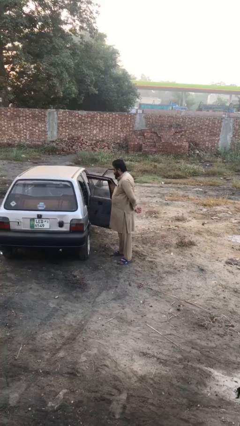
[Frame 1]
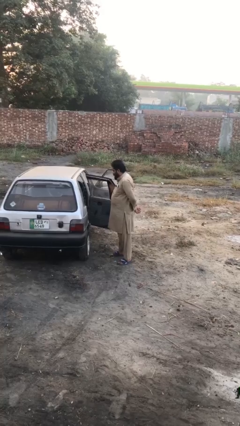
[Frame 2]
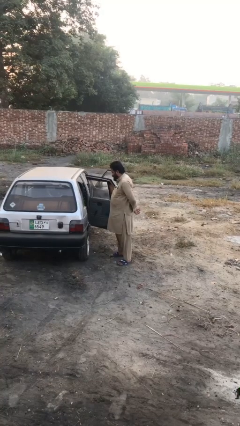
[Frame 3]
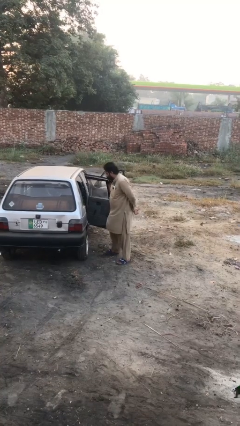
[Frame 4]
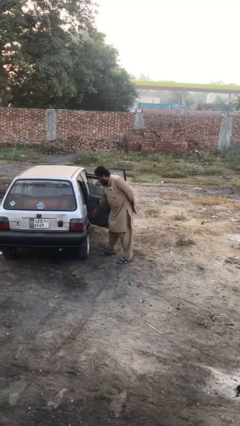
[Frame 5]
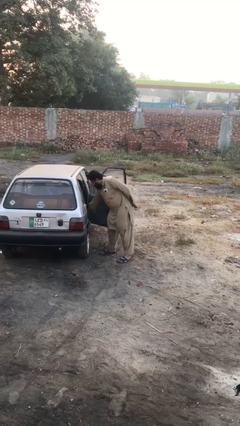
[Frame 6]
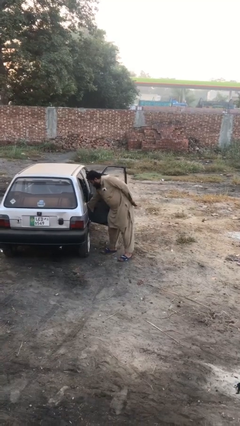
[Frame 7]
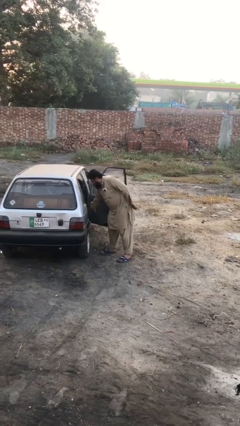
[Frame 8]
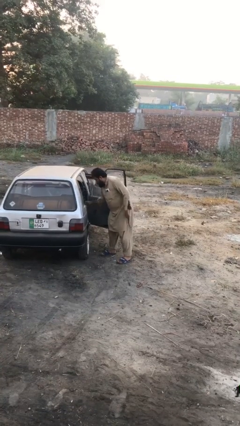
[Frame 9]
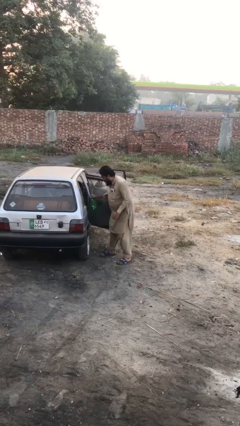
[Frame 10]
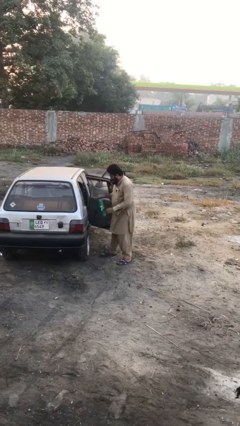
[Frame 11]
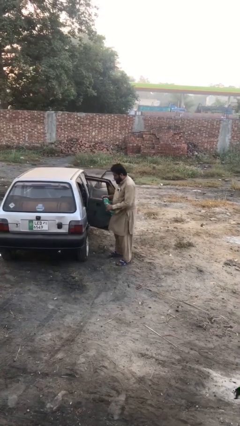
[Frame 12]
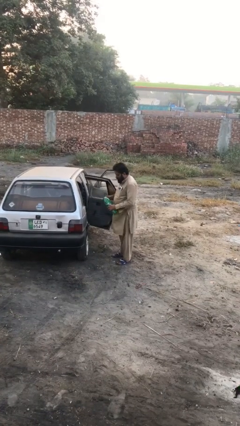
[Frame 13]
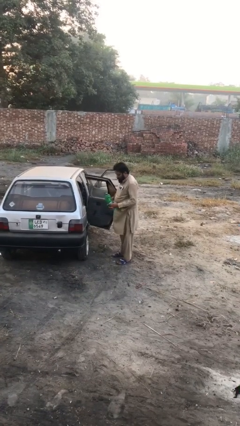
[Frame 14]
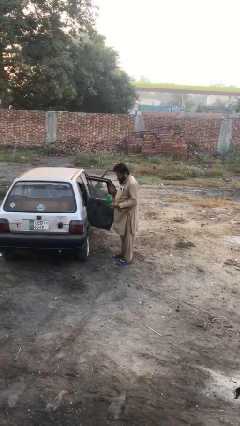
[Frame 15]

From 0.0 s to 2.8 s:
person unloads car

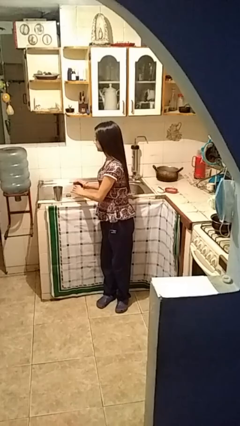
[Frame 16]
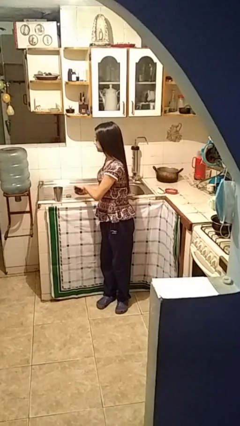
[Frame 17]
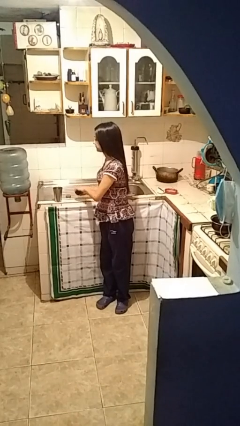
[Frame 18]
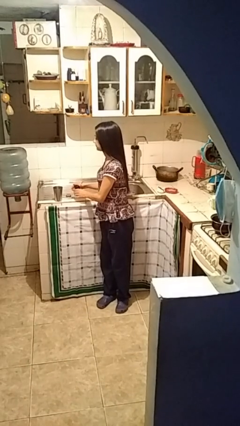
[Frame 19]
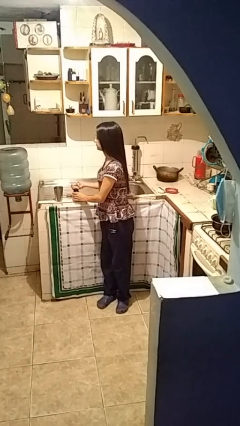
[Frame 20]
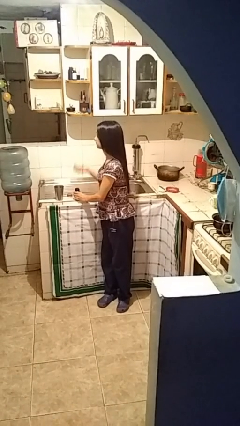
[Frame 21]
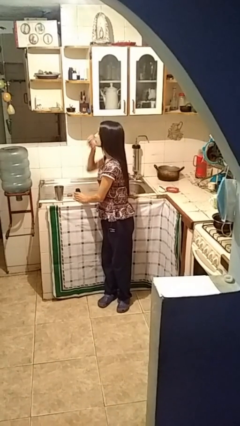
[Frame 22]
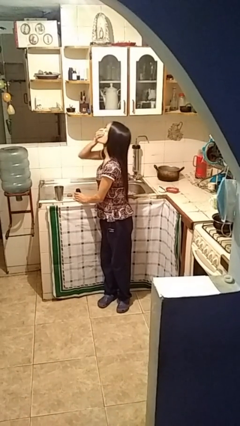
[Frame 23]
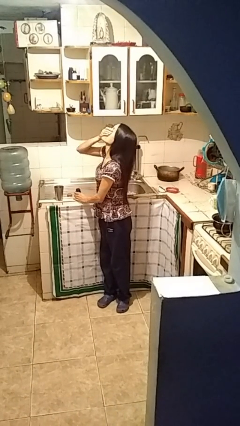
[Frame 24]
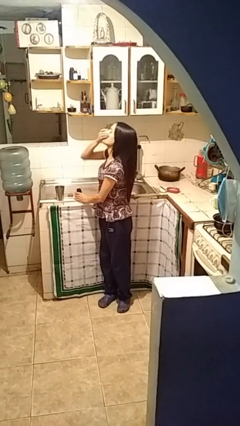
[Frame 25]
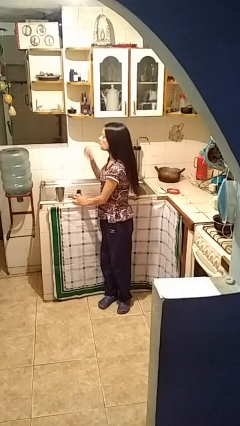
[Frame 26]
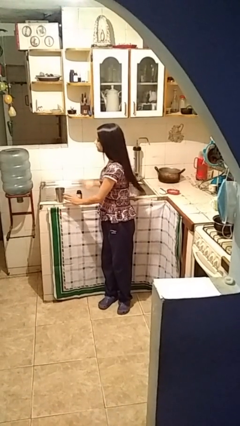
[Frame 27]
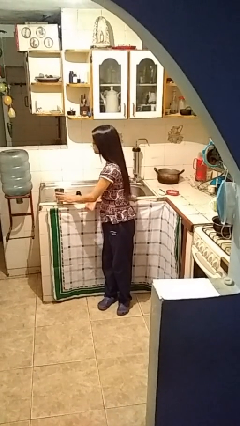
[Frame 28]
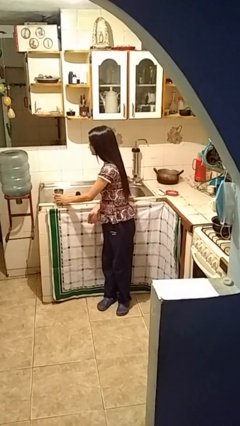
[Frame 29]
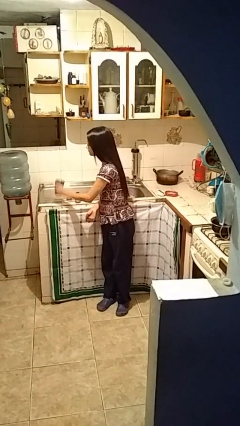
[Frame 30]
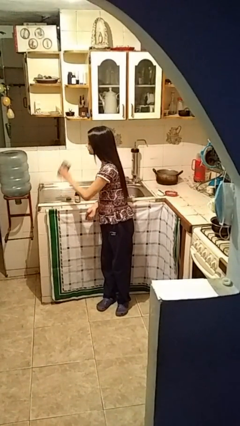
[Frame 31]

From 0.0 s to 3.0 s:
person takes medicine pills

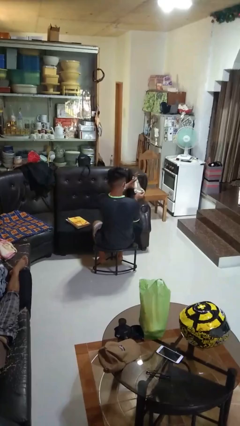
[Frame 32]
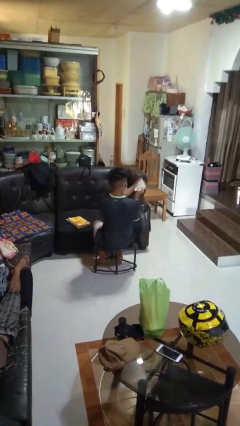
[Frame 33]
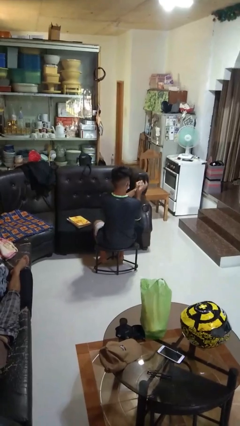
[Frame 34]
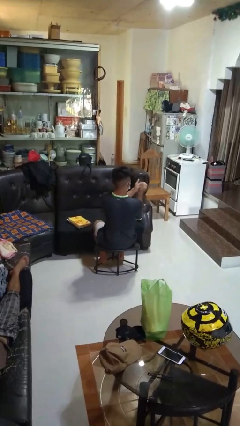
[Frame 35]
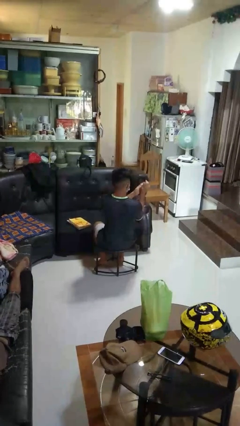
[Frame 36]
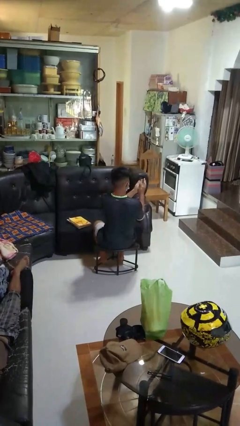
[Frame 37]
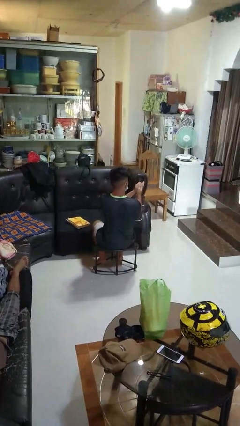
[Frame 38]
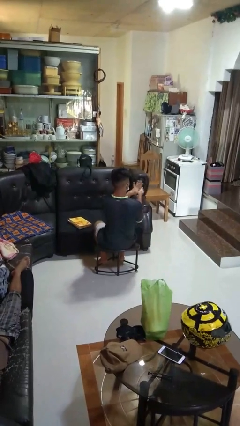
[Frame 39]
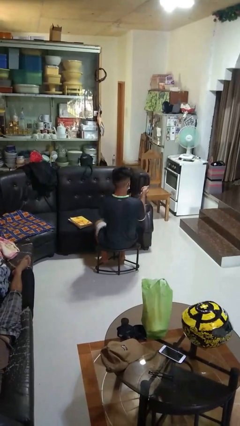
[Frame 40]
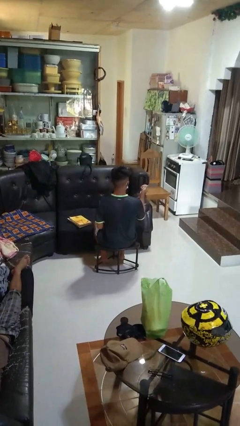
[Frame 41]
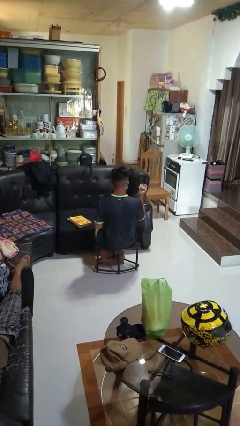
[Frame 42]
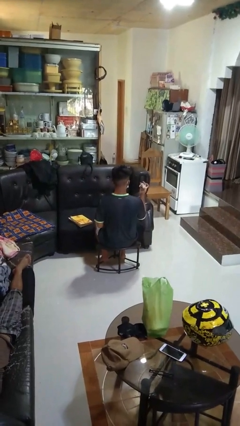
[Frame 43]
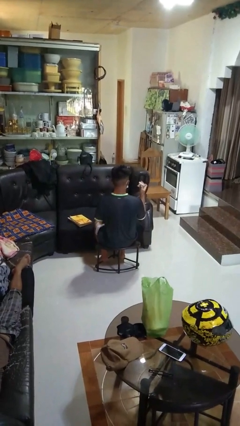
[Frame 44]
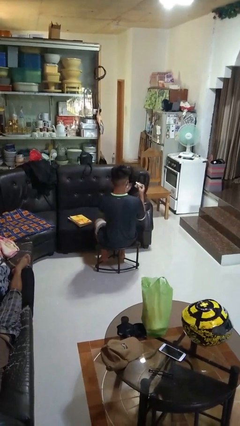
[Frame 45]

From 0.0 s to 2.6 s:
person crumples paper

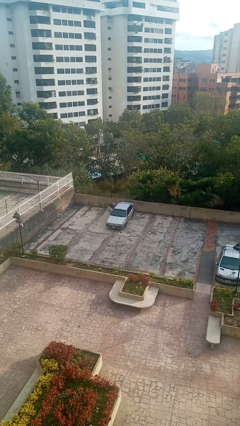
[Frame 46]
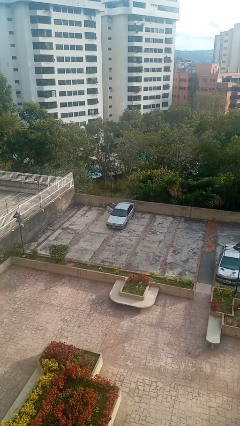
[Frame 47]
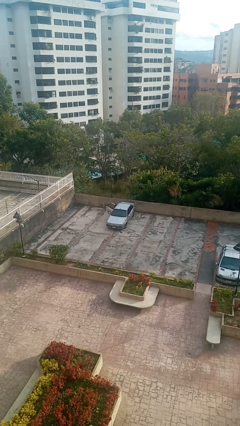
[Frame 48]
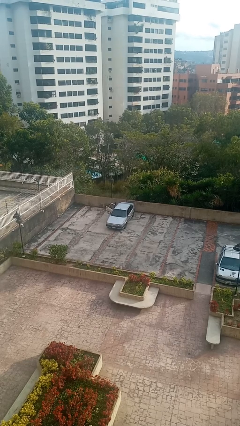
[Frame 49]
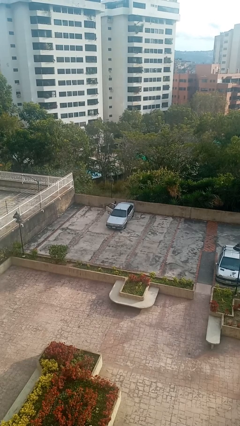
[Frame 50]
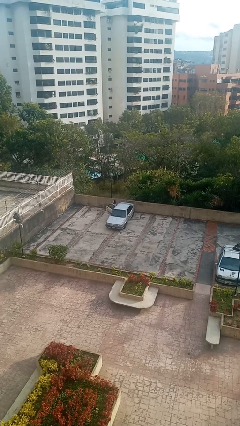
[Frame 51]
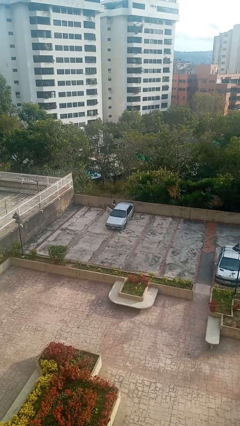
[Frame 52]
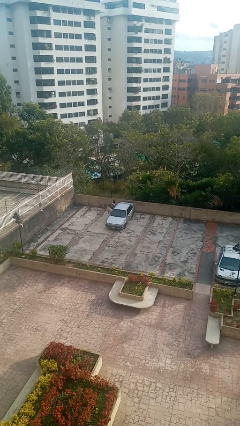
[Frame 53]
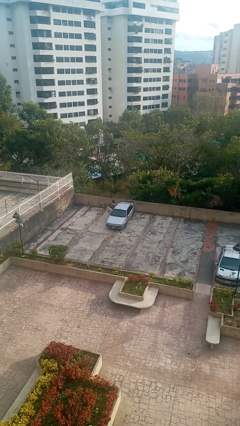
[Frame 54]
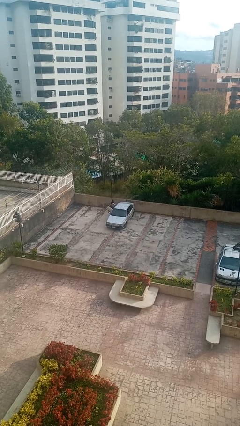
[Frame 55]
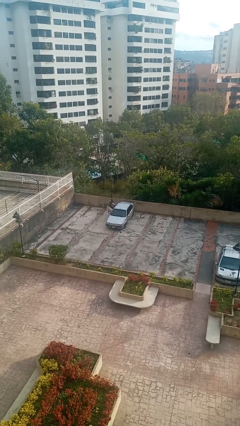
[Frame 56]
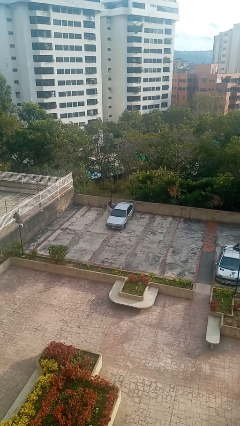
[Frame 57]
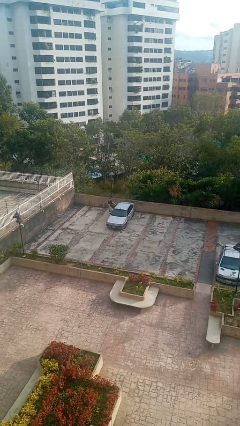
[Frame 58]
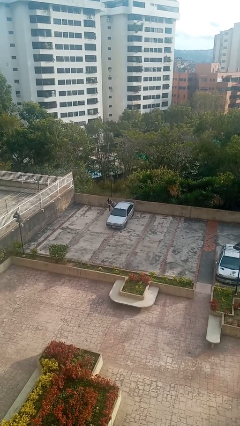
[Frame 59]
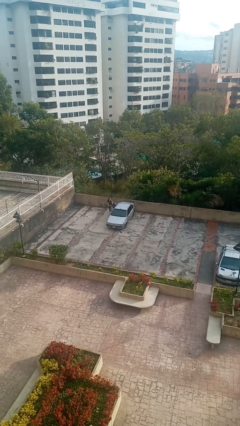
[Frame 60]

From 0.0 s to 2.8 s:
car drops off person

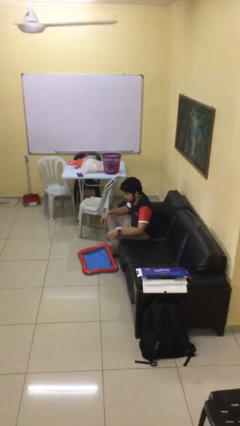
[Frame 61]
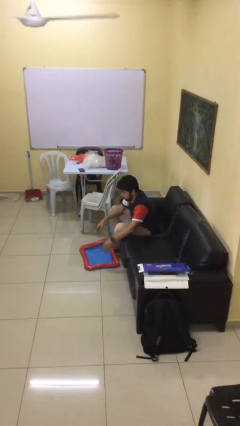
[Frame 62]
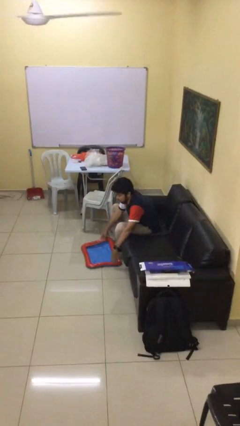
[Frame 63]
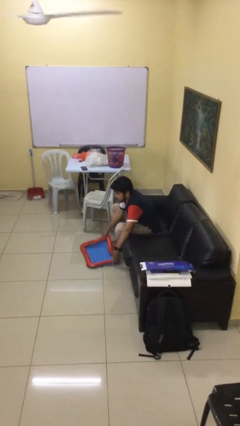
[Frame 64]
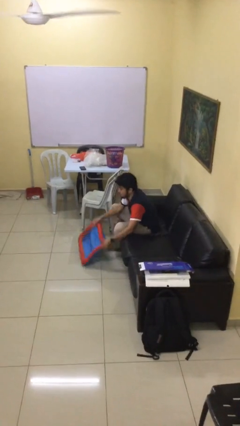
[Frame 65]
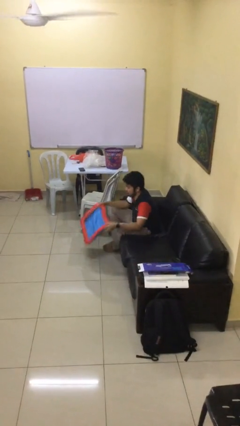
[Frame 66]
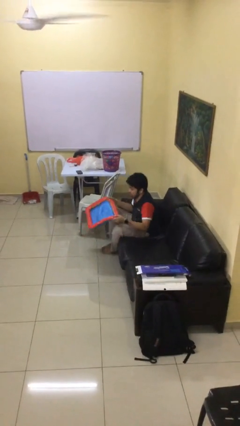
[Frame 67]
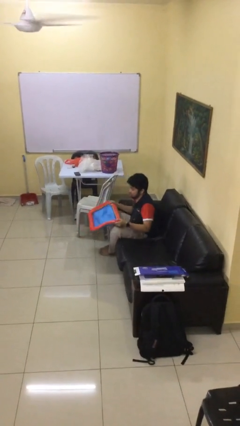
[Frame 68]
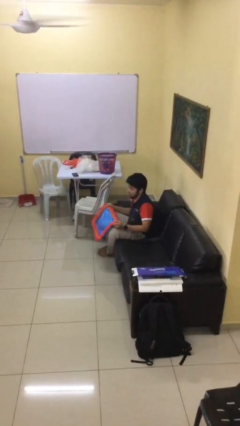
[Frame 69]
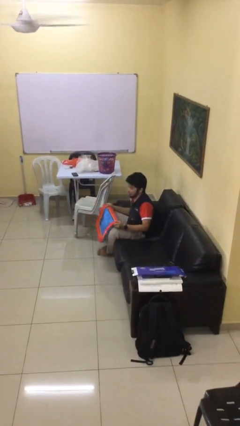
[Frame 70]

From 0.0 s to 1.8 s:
person picks up object from floor

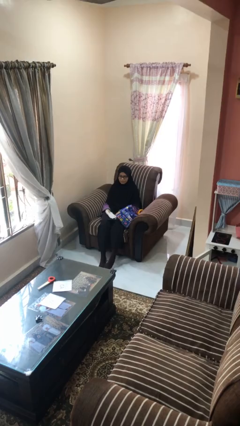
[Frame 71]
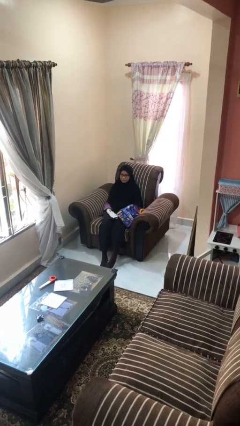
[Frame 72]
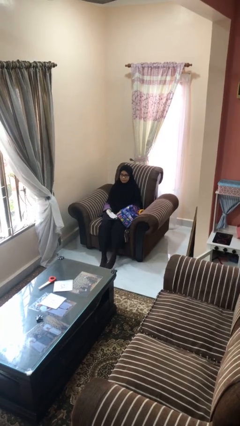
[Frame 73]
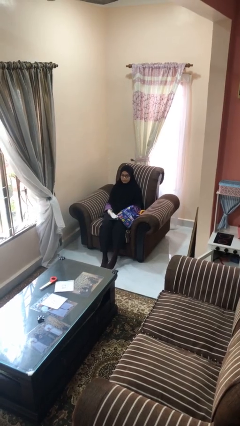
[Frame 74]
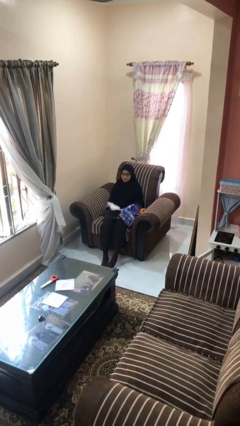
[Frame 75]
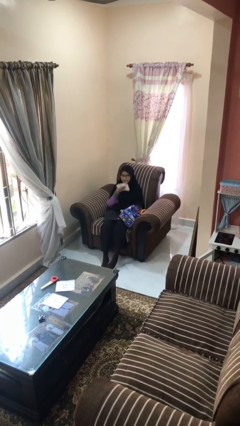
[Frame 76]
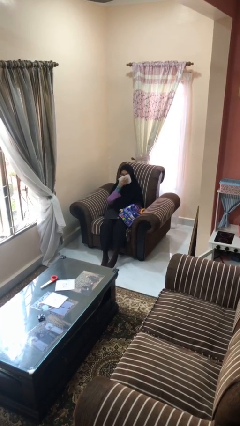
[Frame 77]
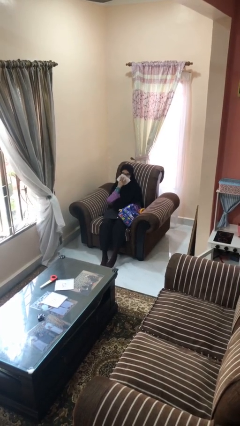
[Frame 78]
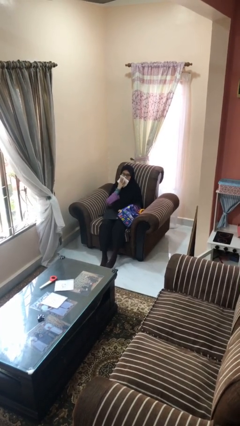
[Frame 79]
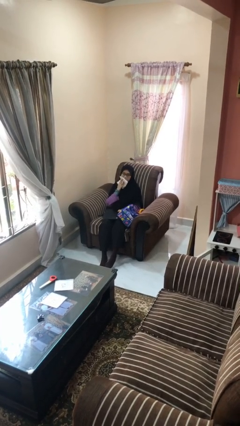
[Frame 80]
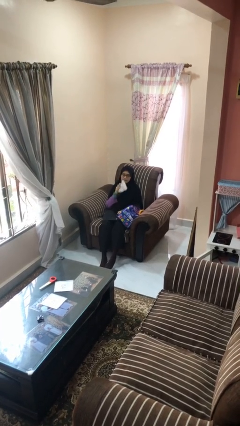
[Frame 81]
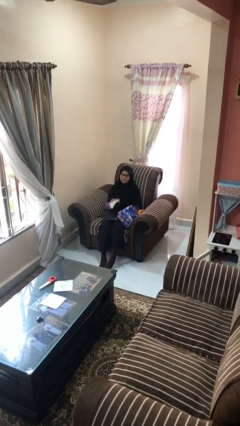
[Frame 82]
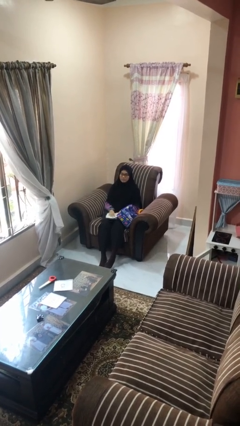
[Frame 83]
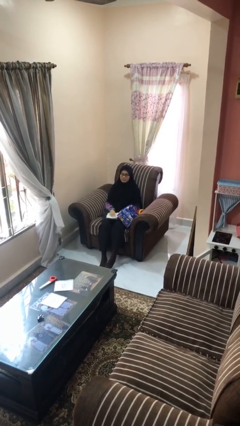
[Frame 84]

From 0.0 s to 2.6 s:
person wipes mouth with napkin

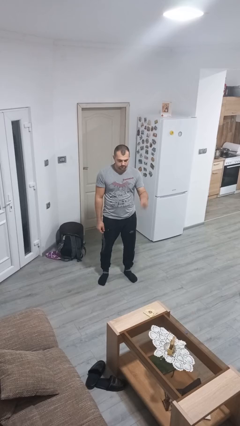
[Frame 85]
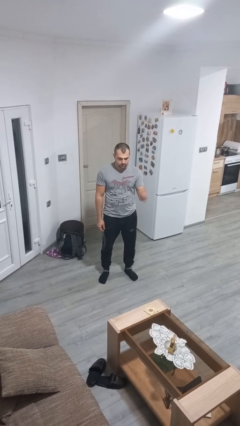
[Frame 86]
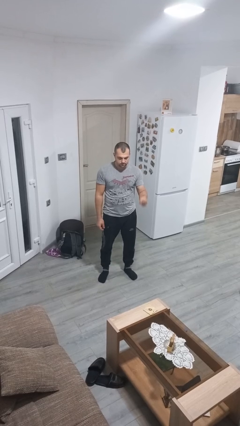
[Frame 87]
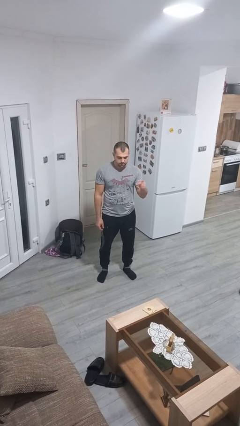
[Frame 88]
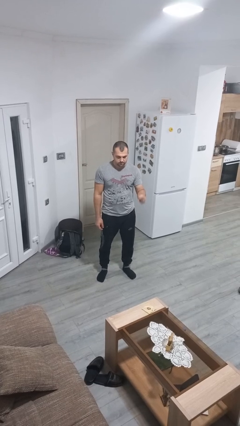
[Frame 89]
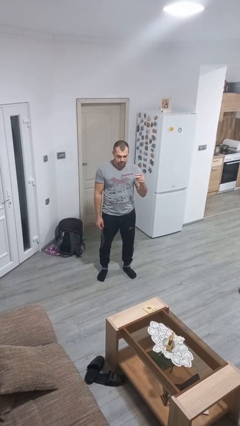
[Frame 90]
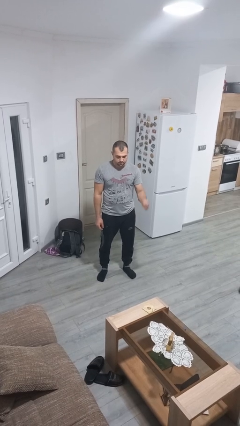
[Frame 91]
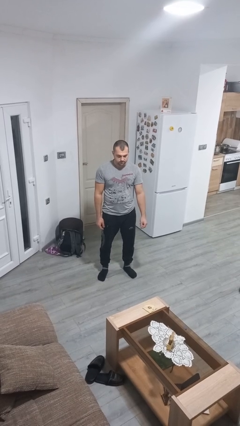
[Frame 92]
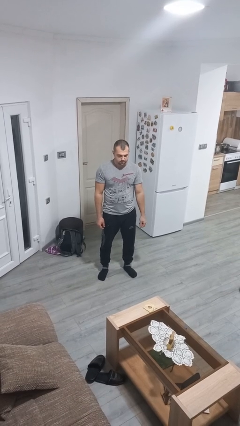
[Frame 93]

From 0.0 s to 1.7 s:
person snaps fingers

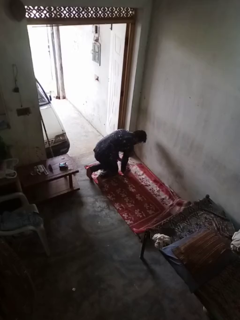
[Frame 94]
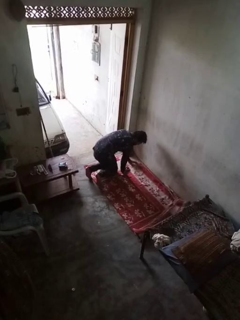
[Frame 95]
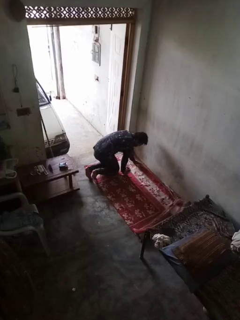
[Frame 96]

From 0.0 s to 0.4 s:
person crawls
